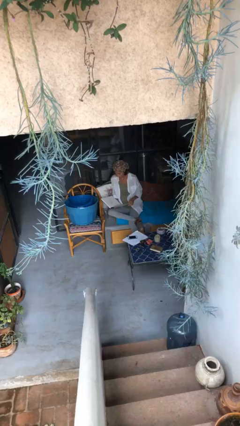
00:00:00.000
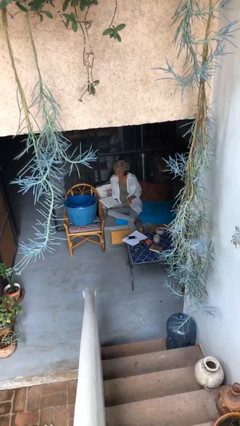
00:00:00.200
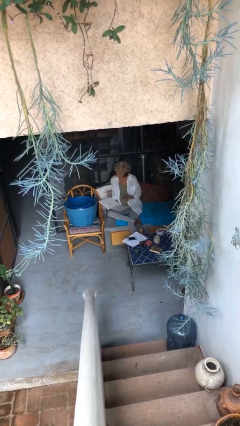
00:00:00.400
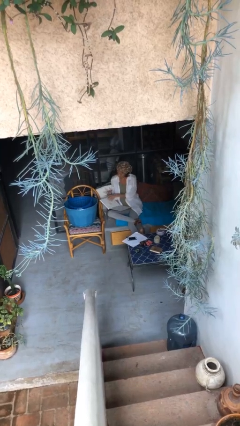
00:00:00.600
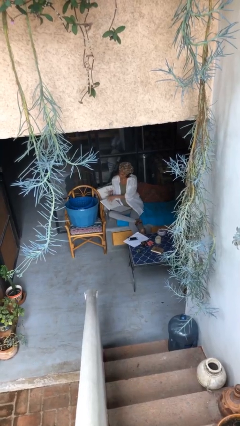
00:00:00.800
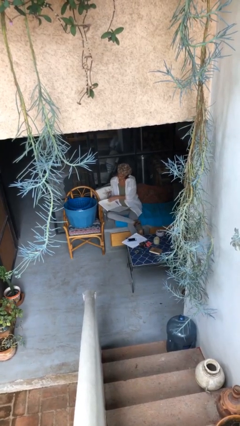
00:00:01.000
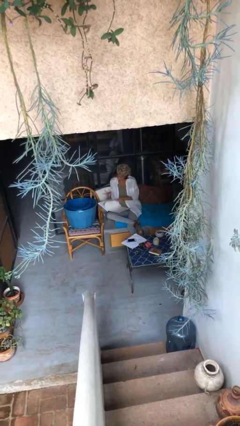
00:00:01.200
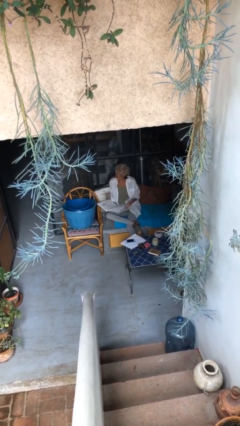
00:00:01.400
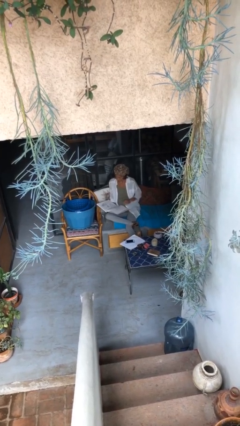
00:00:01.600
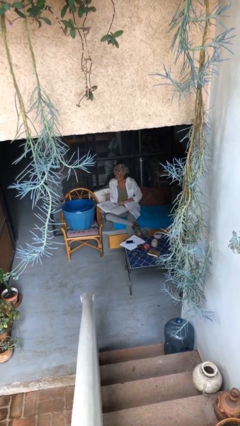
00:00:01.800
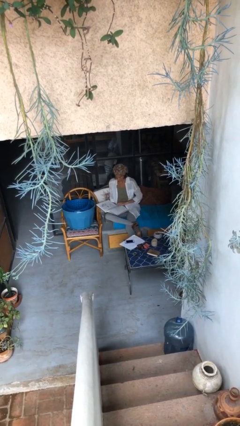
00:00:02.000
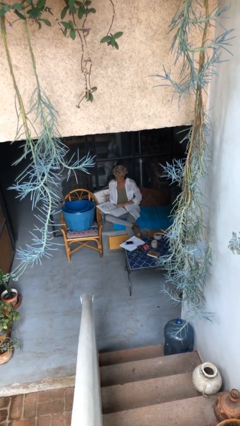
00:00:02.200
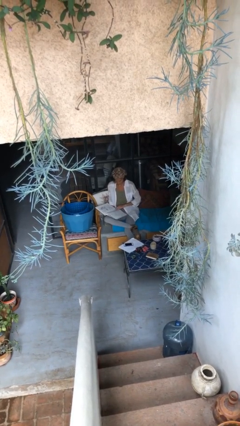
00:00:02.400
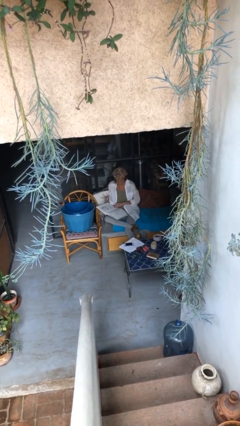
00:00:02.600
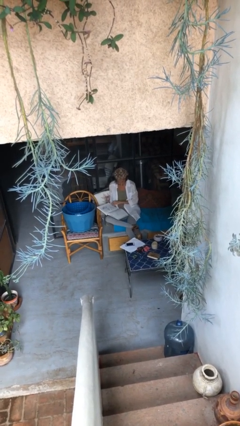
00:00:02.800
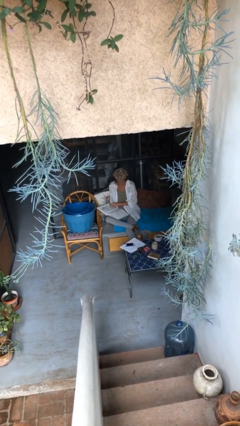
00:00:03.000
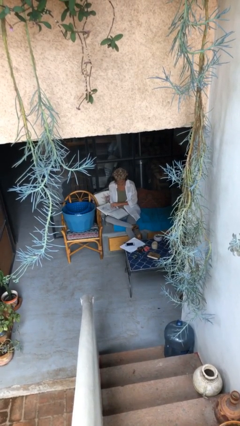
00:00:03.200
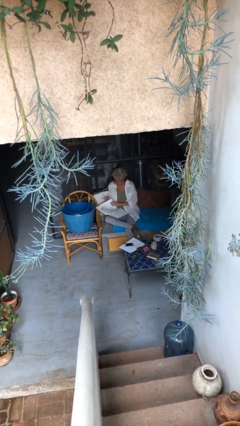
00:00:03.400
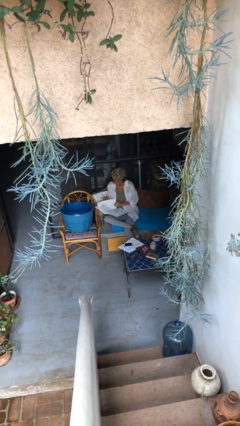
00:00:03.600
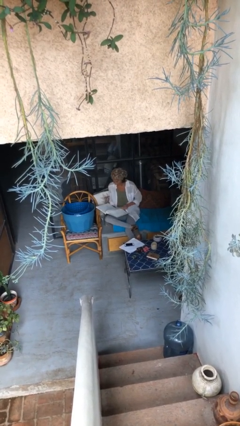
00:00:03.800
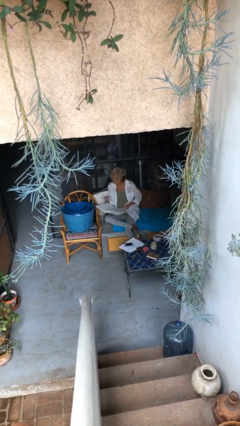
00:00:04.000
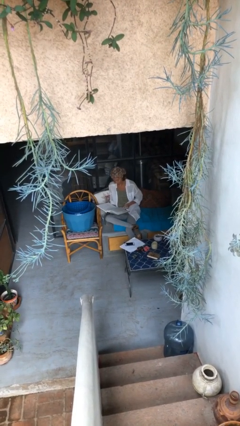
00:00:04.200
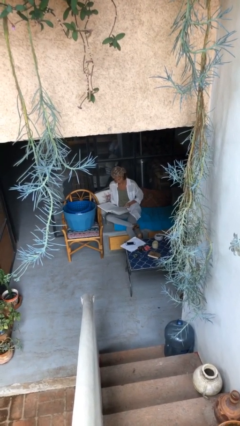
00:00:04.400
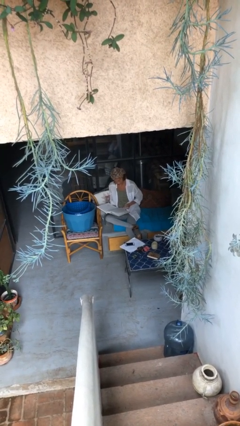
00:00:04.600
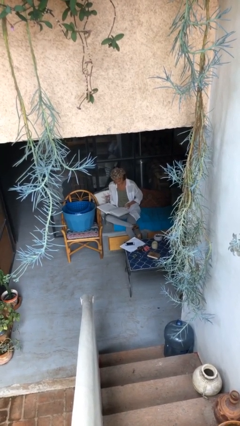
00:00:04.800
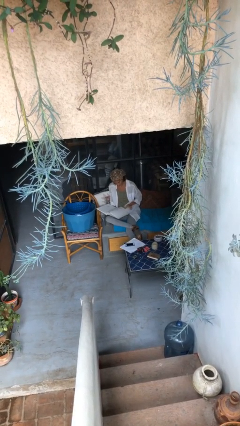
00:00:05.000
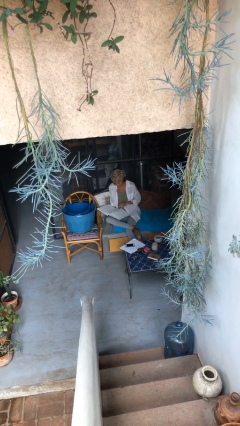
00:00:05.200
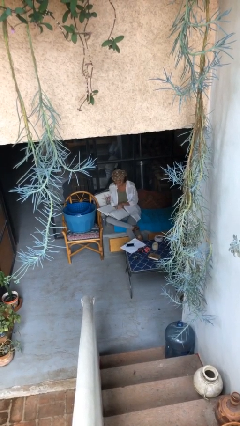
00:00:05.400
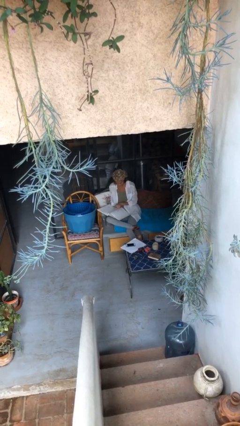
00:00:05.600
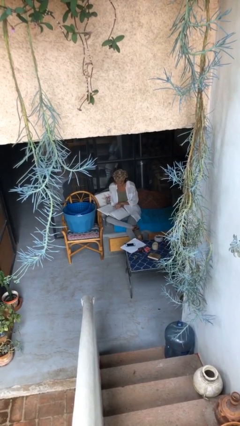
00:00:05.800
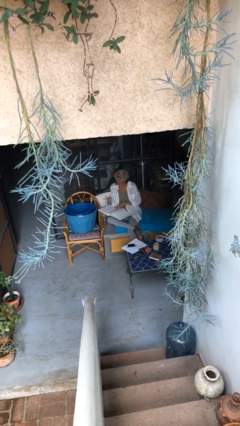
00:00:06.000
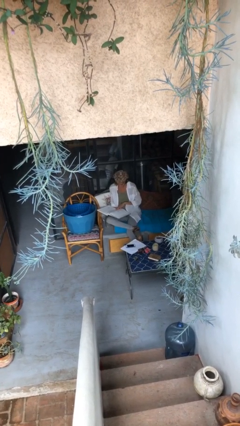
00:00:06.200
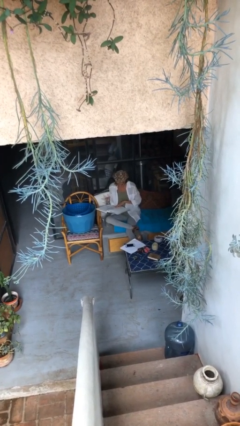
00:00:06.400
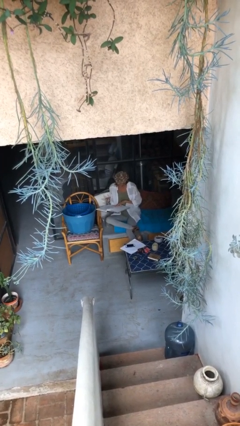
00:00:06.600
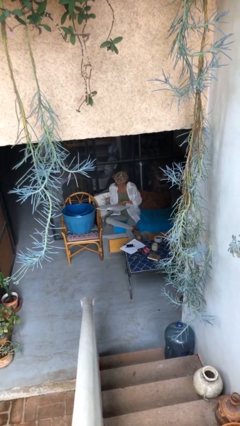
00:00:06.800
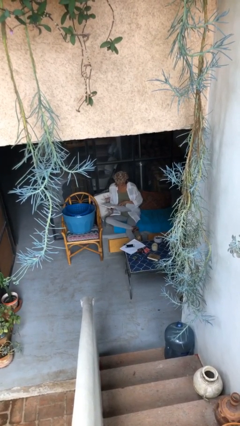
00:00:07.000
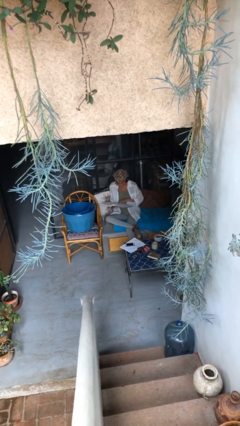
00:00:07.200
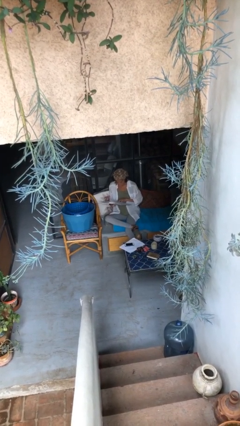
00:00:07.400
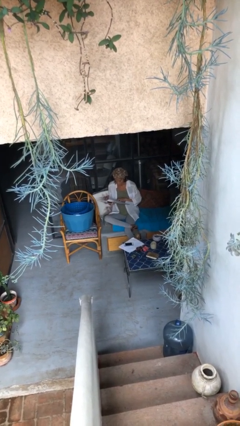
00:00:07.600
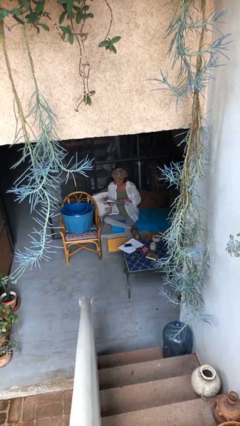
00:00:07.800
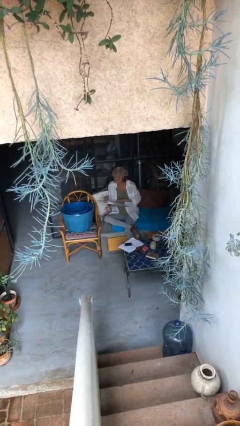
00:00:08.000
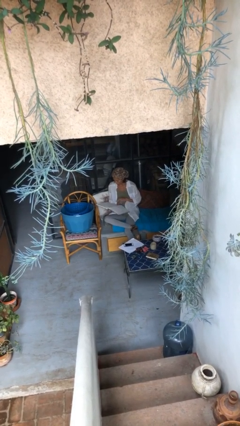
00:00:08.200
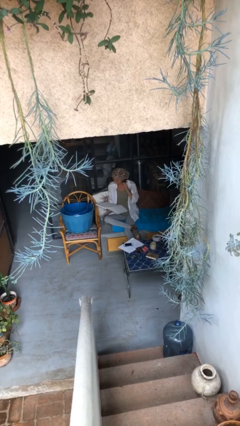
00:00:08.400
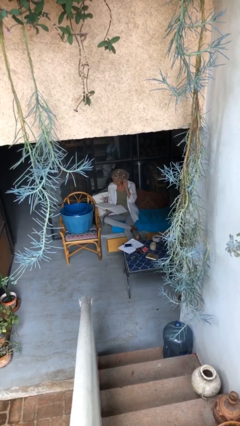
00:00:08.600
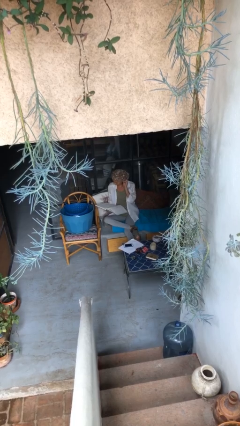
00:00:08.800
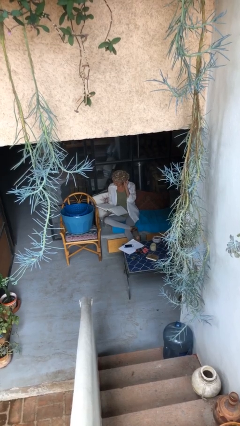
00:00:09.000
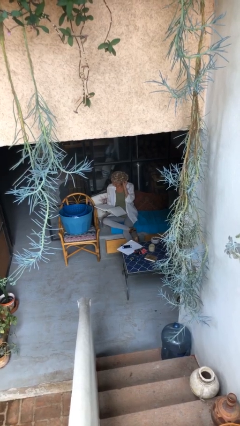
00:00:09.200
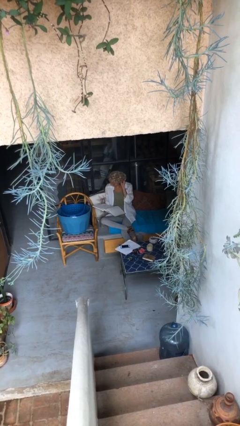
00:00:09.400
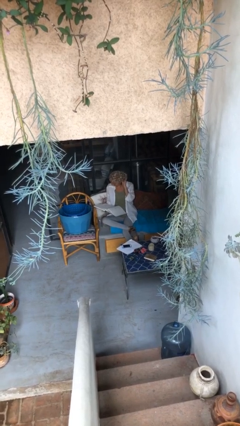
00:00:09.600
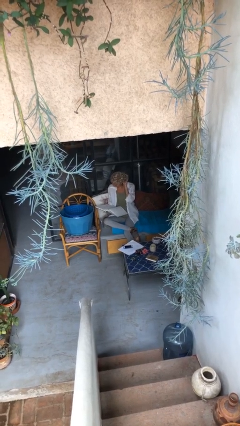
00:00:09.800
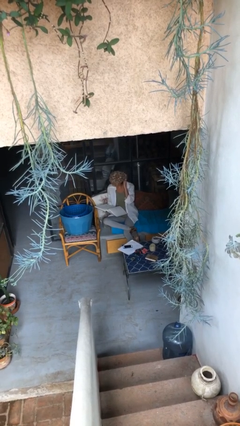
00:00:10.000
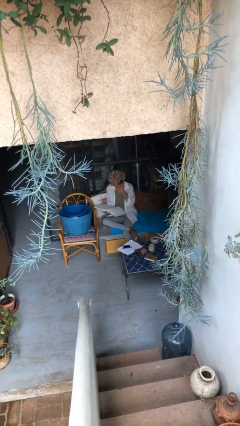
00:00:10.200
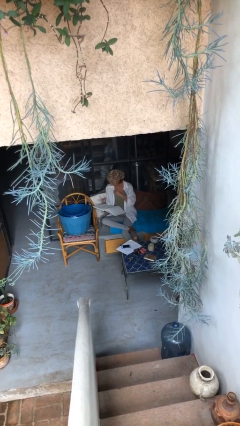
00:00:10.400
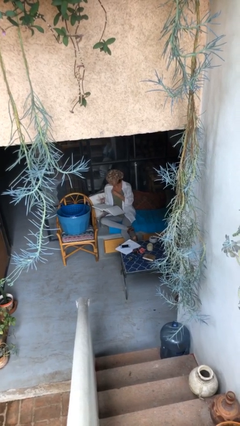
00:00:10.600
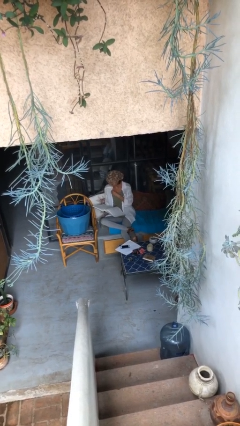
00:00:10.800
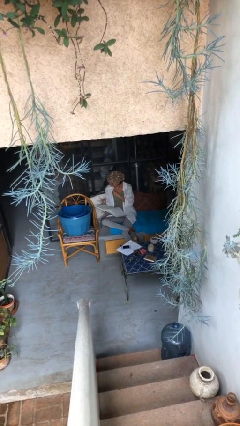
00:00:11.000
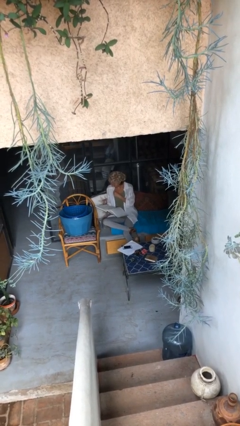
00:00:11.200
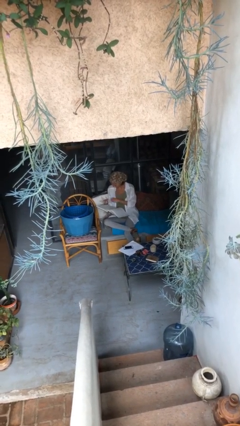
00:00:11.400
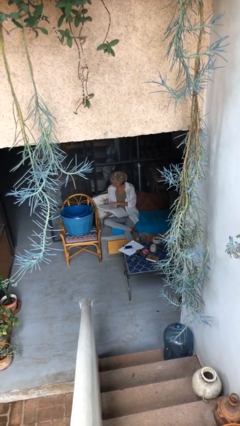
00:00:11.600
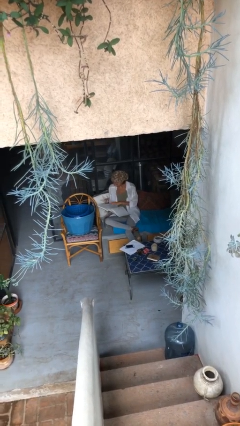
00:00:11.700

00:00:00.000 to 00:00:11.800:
person reads document

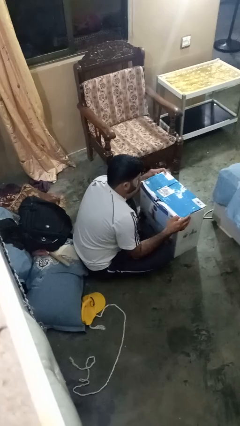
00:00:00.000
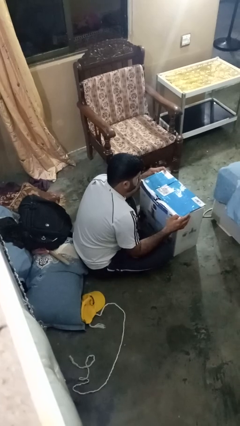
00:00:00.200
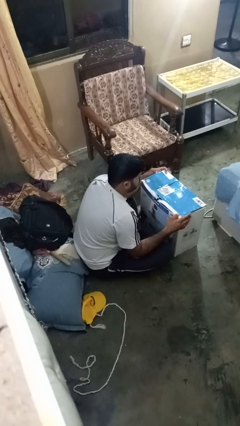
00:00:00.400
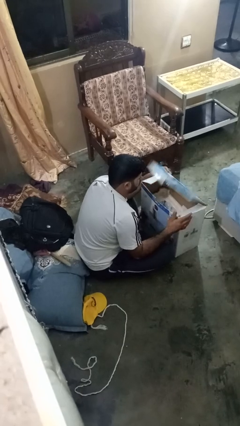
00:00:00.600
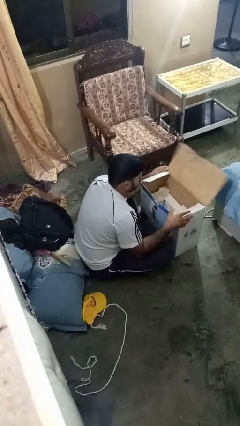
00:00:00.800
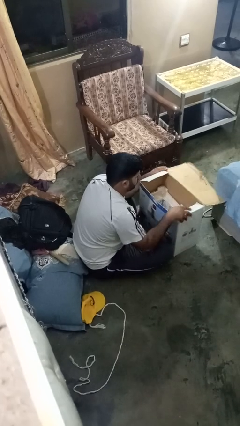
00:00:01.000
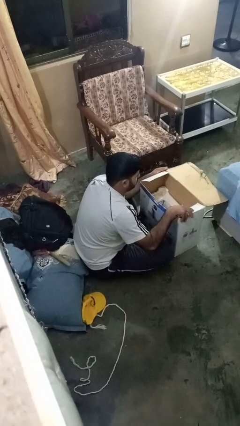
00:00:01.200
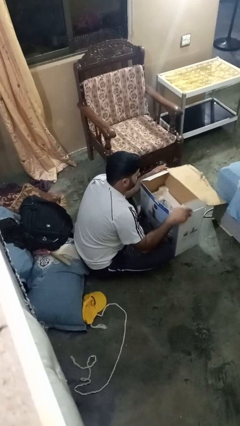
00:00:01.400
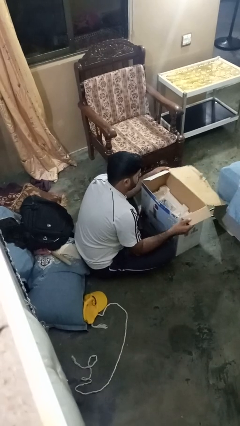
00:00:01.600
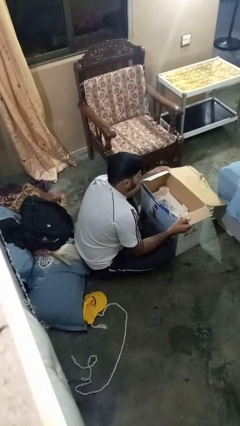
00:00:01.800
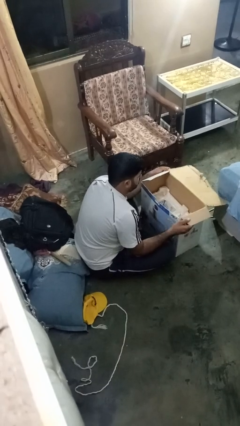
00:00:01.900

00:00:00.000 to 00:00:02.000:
person opens box

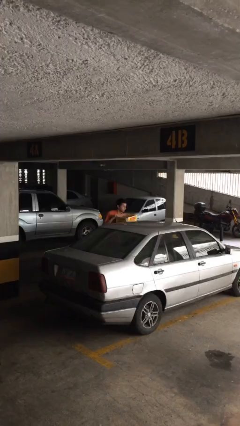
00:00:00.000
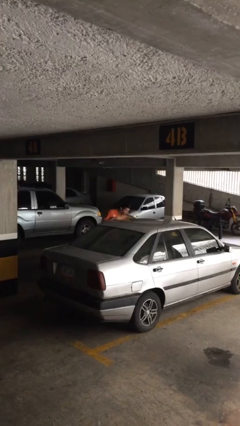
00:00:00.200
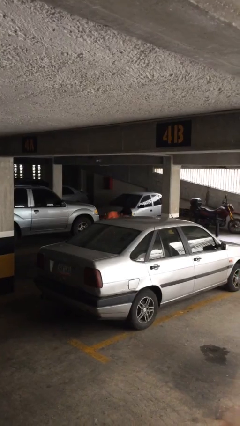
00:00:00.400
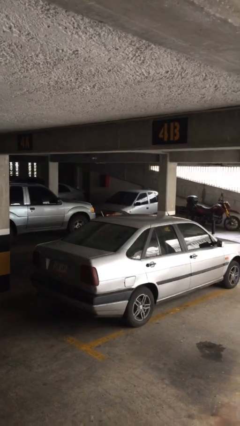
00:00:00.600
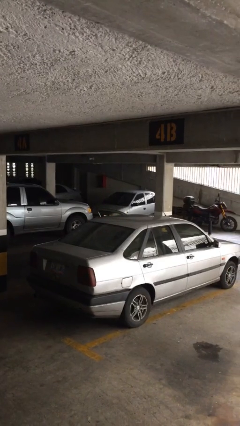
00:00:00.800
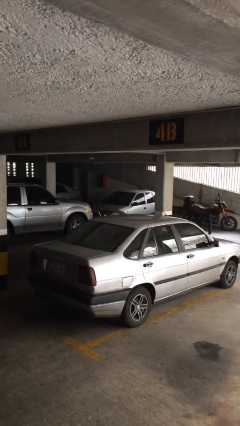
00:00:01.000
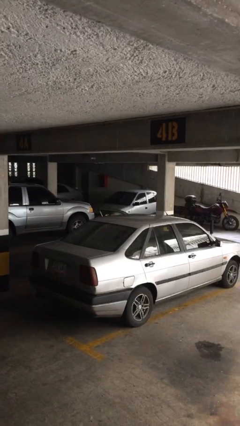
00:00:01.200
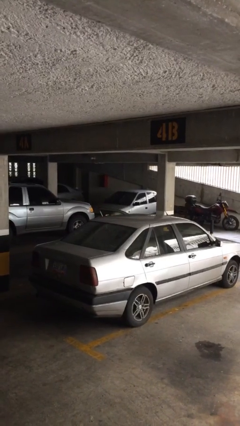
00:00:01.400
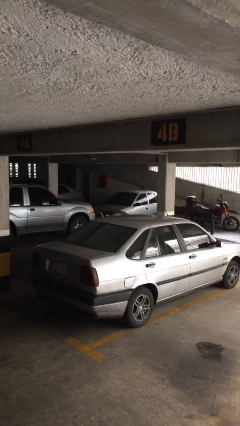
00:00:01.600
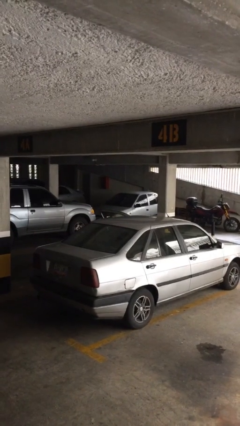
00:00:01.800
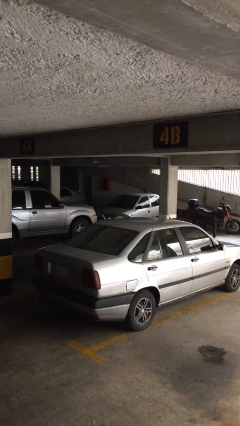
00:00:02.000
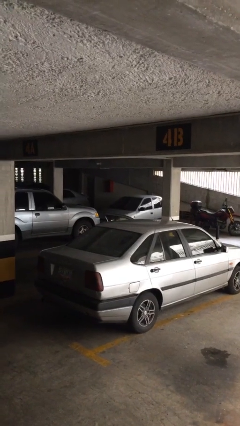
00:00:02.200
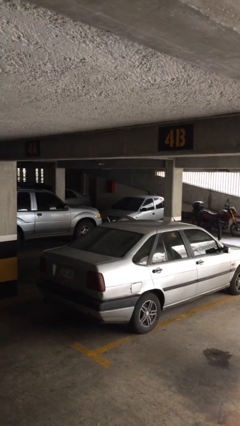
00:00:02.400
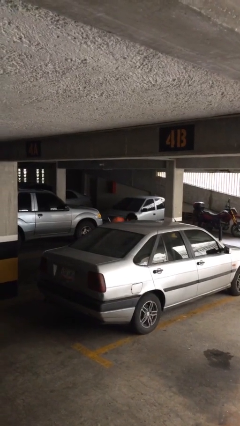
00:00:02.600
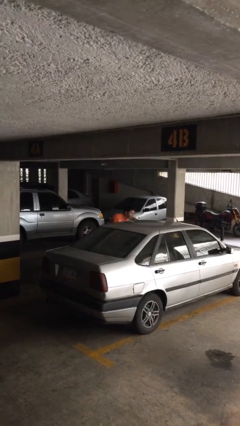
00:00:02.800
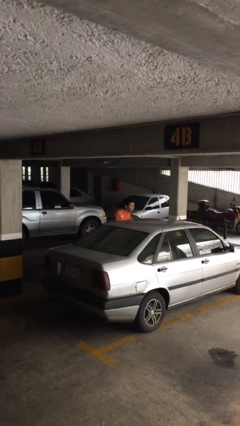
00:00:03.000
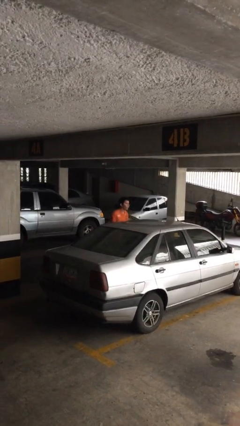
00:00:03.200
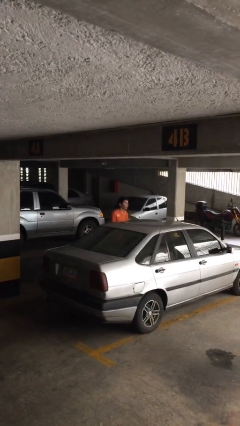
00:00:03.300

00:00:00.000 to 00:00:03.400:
person loads car

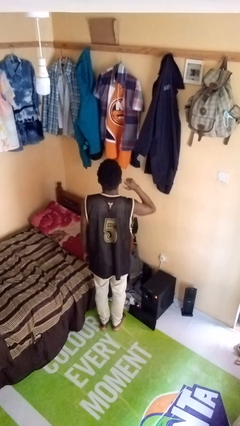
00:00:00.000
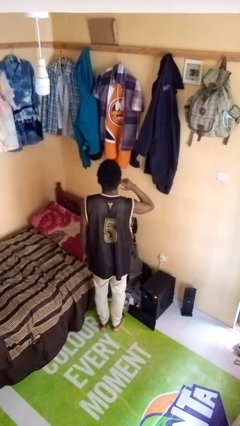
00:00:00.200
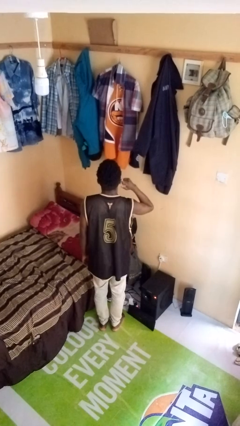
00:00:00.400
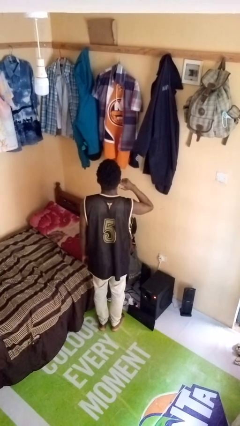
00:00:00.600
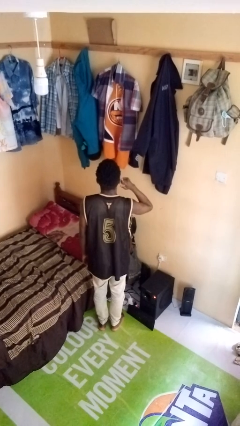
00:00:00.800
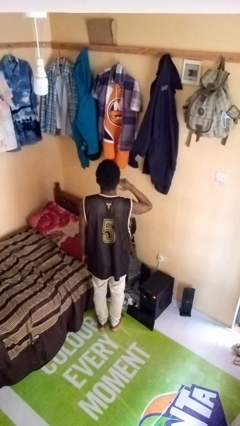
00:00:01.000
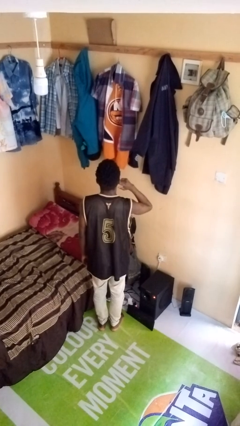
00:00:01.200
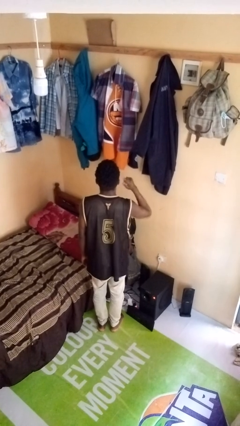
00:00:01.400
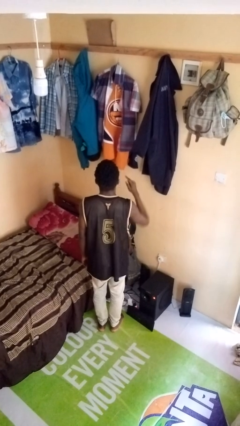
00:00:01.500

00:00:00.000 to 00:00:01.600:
person gestures listen closely
